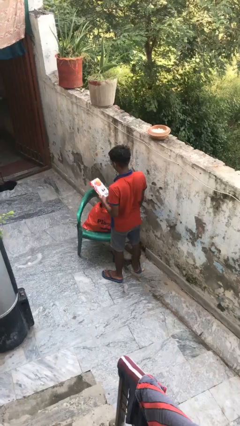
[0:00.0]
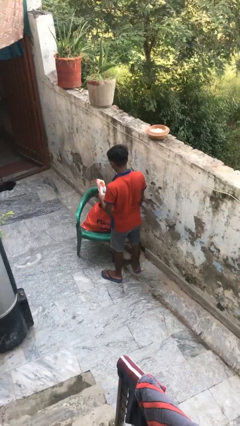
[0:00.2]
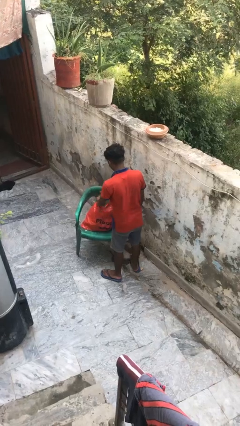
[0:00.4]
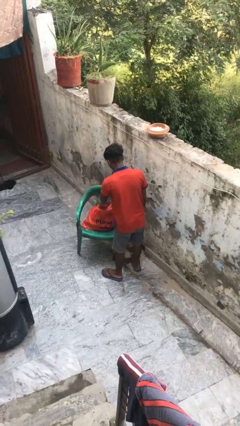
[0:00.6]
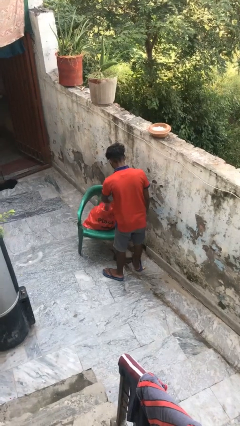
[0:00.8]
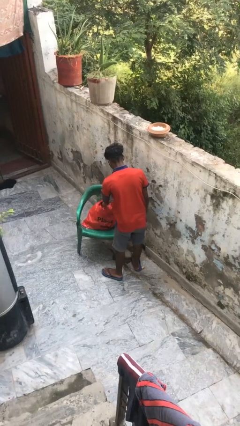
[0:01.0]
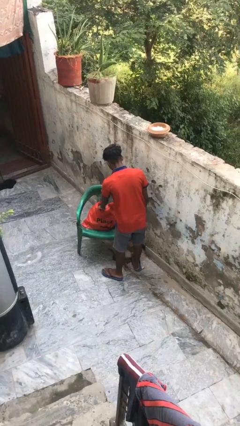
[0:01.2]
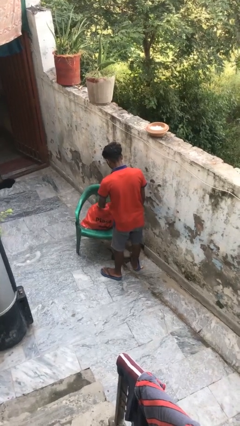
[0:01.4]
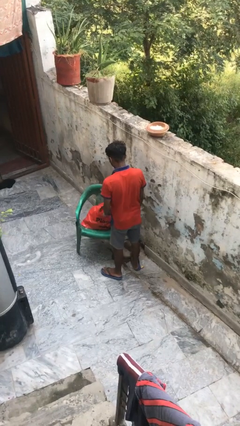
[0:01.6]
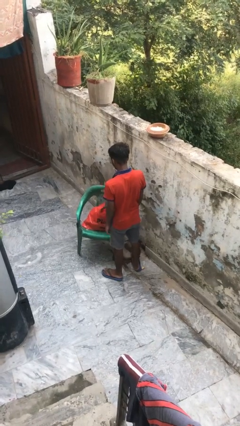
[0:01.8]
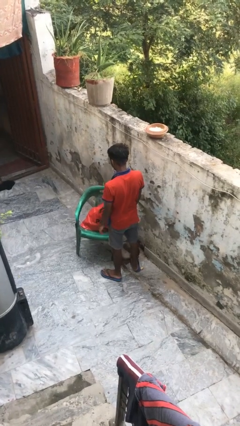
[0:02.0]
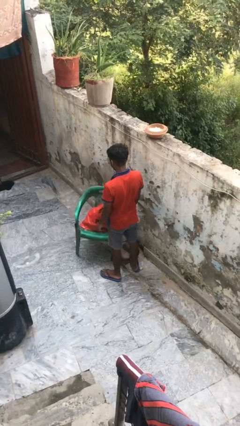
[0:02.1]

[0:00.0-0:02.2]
person puts object into bag

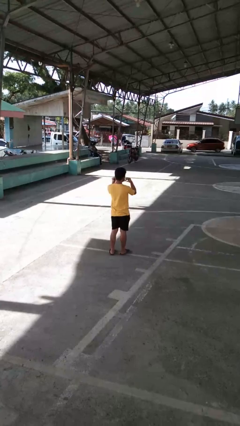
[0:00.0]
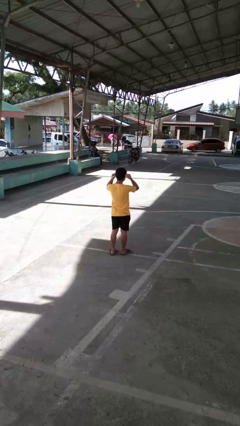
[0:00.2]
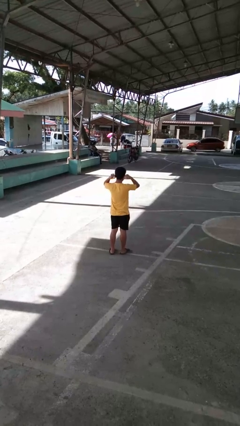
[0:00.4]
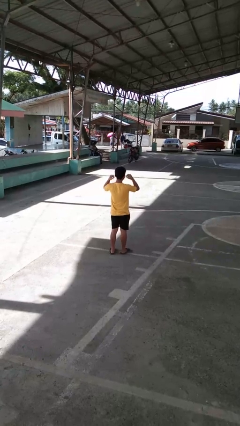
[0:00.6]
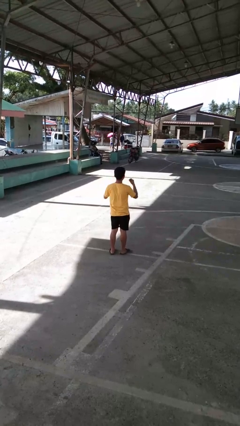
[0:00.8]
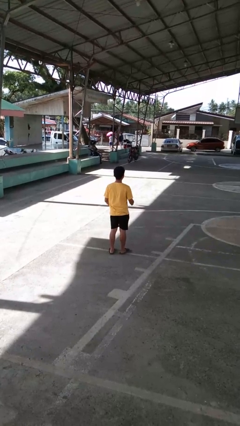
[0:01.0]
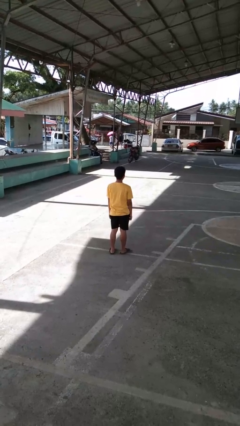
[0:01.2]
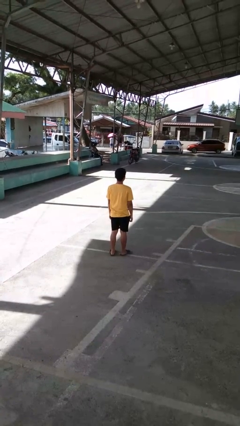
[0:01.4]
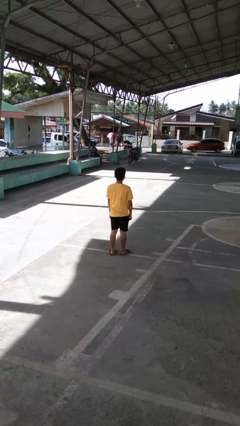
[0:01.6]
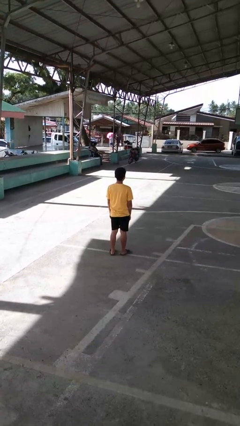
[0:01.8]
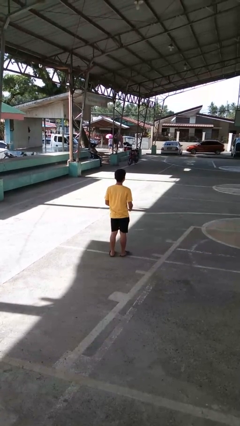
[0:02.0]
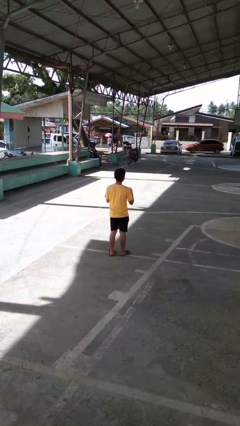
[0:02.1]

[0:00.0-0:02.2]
person puts on facemask

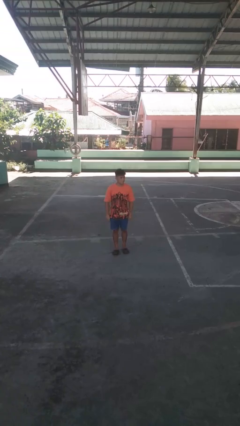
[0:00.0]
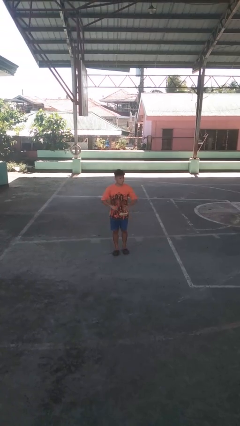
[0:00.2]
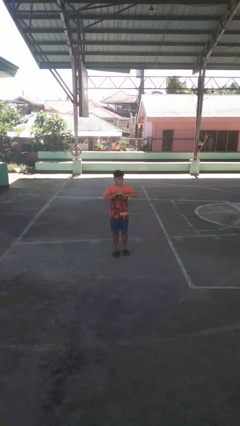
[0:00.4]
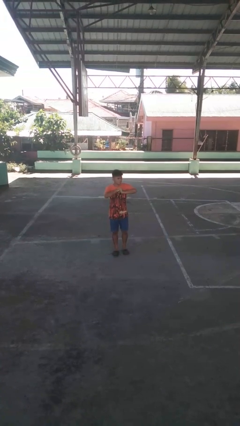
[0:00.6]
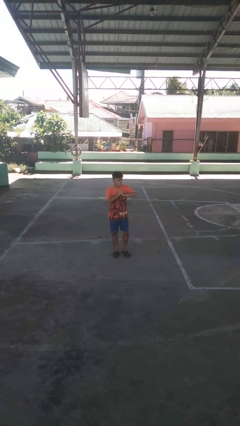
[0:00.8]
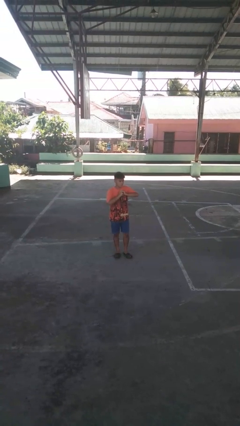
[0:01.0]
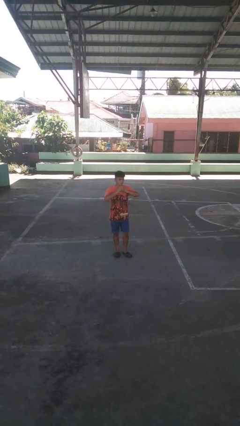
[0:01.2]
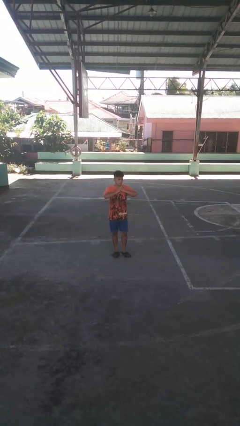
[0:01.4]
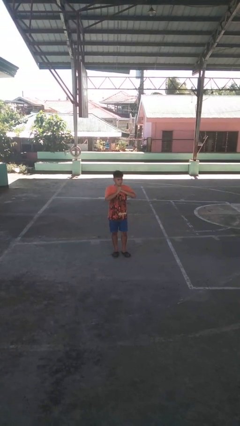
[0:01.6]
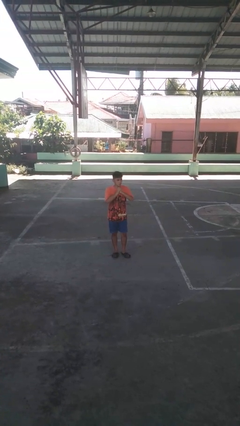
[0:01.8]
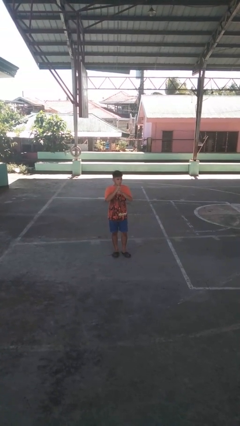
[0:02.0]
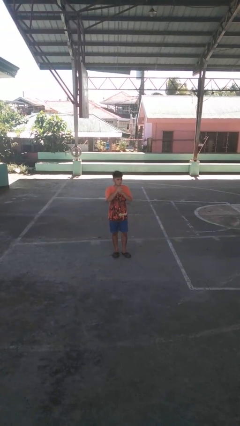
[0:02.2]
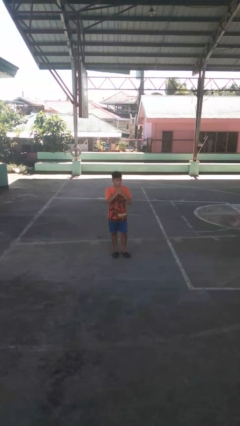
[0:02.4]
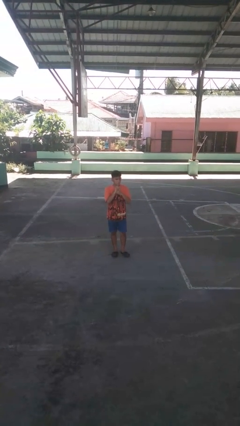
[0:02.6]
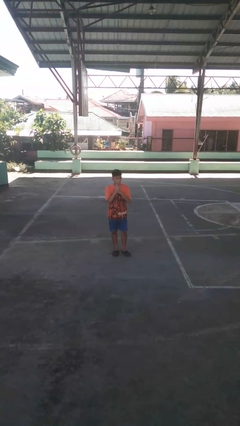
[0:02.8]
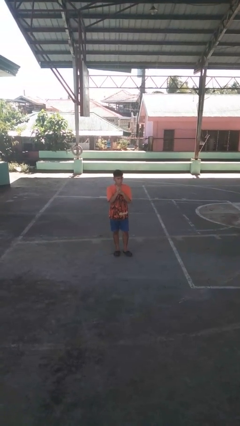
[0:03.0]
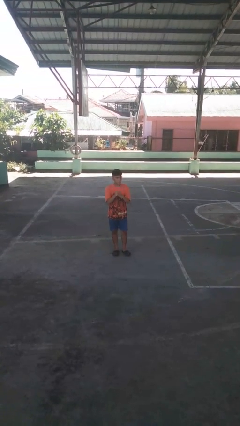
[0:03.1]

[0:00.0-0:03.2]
person cracks knuckles

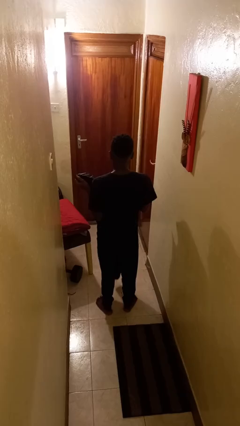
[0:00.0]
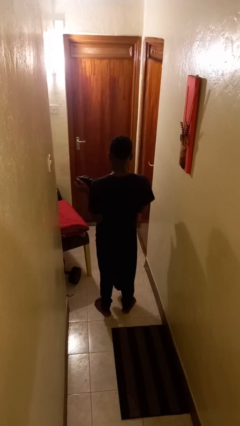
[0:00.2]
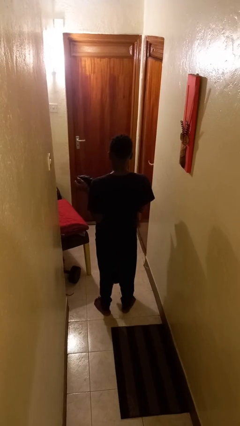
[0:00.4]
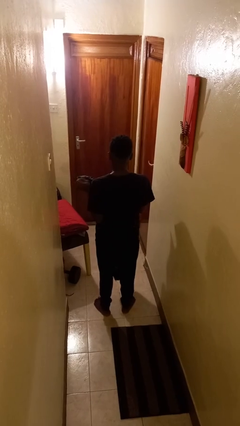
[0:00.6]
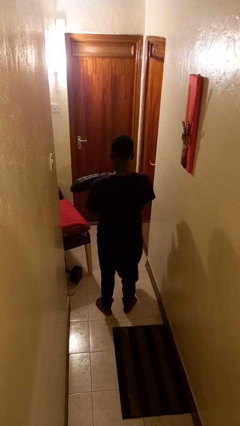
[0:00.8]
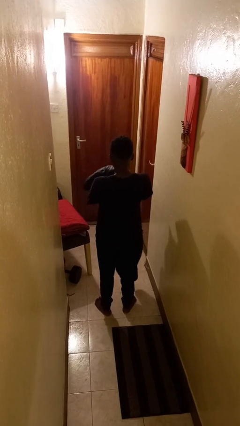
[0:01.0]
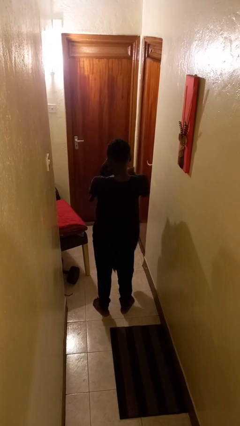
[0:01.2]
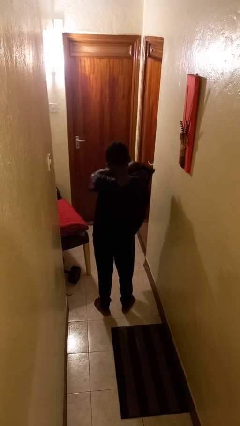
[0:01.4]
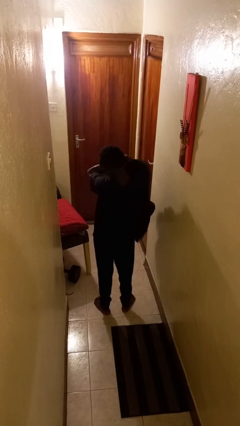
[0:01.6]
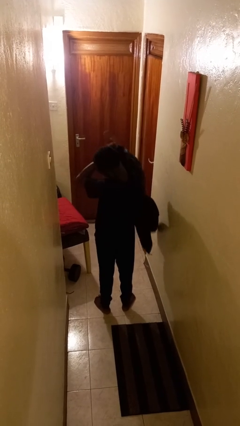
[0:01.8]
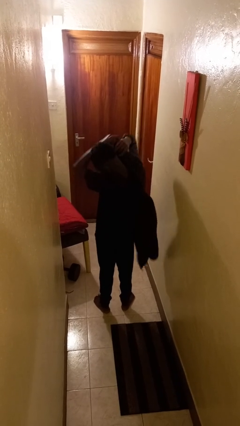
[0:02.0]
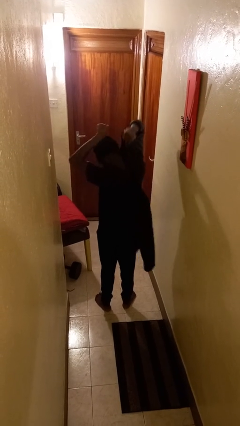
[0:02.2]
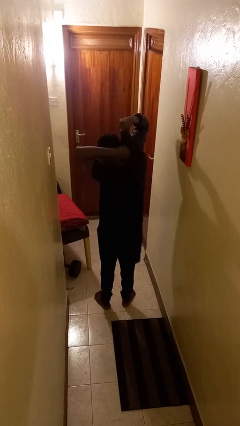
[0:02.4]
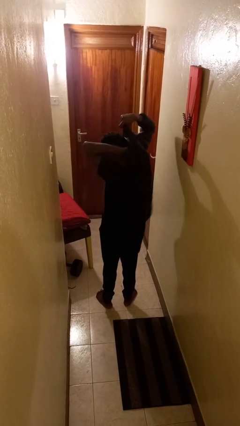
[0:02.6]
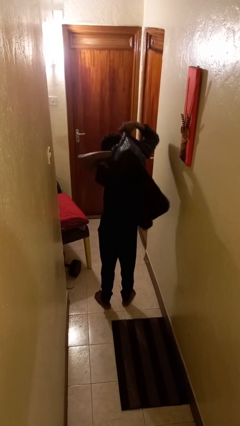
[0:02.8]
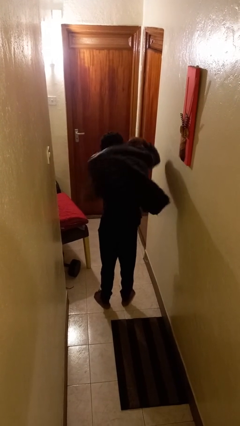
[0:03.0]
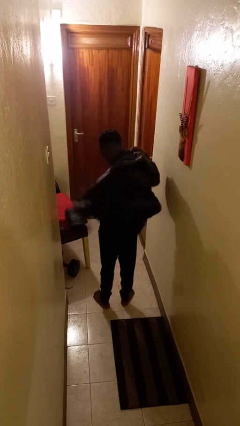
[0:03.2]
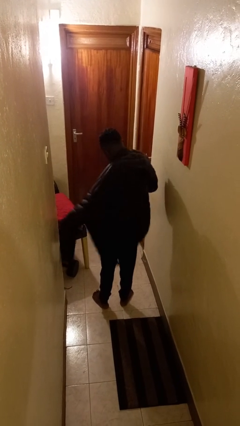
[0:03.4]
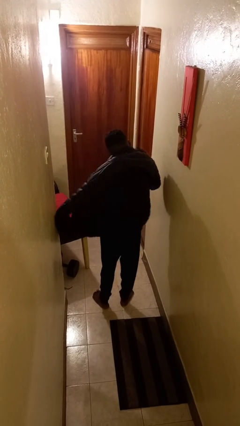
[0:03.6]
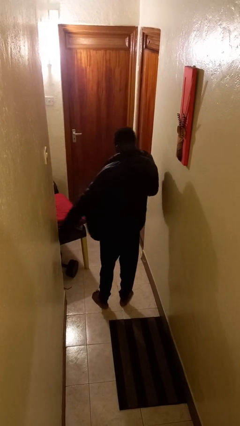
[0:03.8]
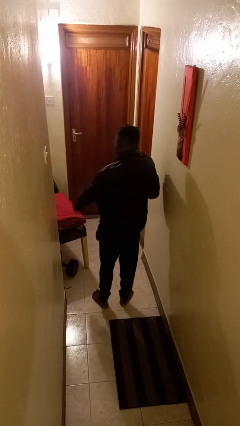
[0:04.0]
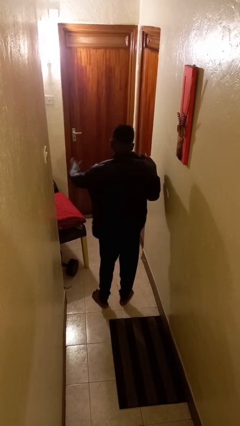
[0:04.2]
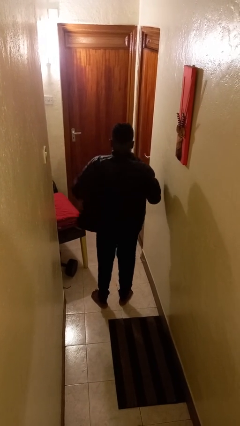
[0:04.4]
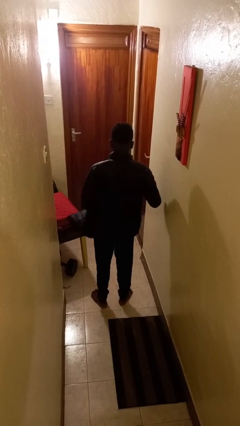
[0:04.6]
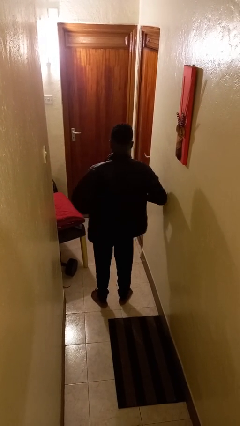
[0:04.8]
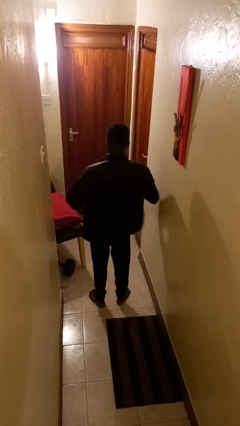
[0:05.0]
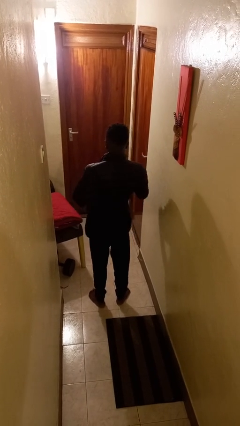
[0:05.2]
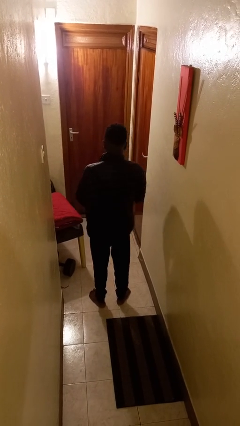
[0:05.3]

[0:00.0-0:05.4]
person puts on jacket

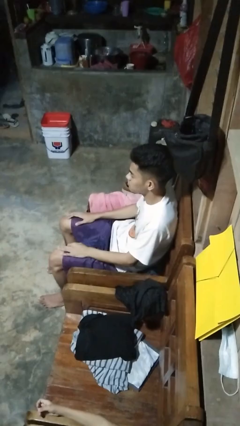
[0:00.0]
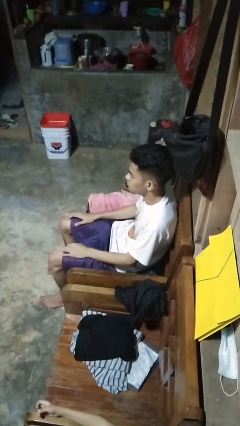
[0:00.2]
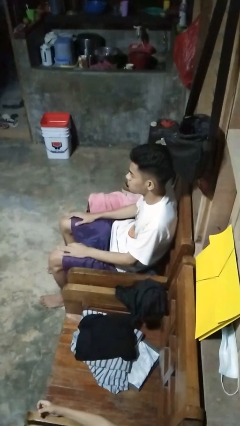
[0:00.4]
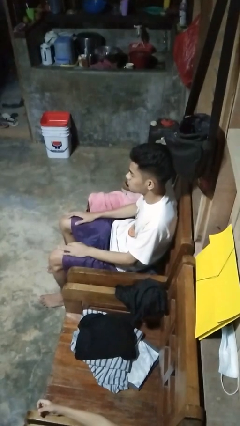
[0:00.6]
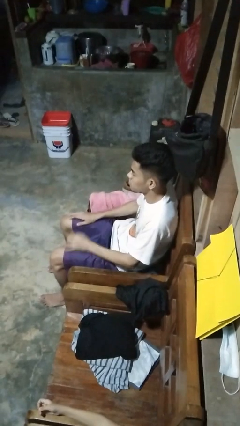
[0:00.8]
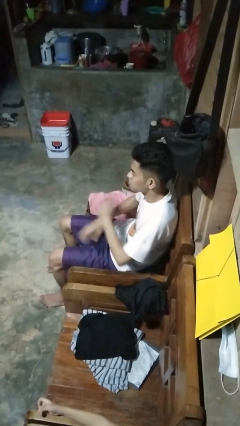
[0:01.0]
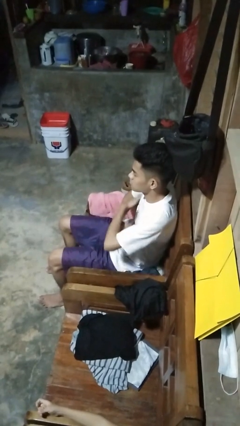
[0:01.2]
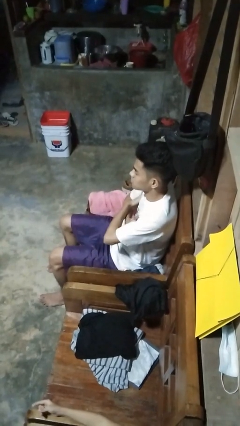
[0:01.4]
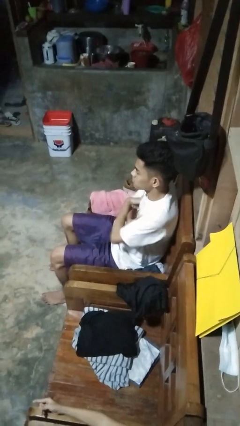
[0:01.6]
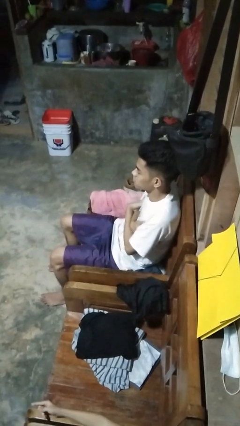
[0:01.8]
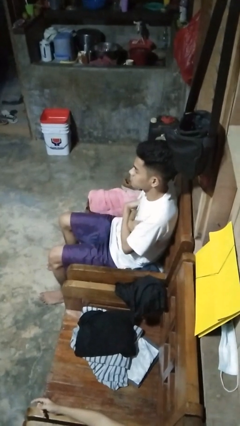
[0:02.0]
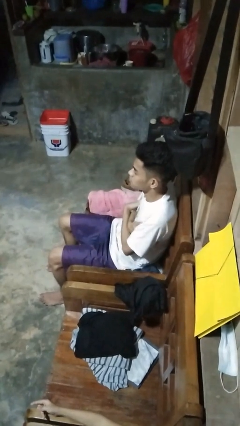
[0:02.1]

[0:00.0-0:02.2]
person crosses arms

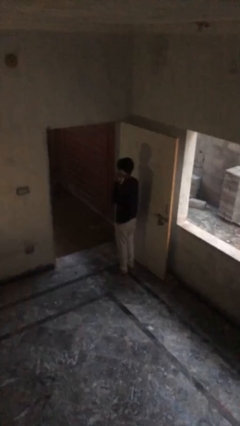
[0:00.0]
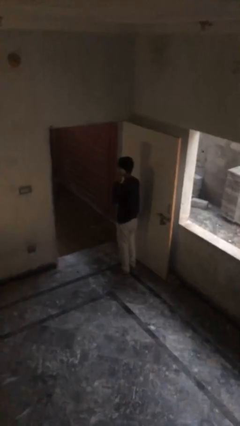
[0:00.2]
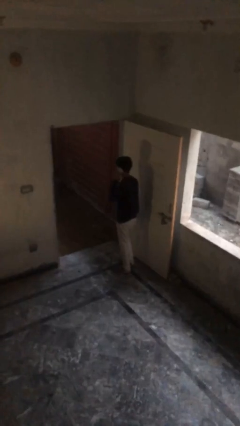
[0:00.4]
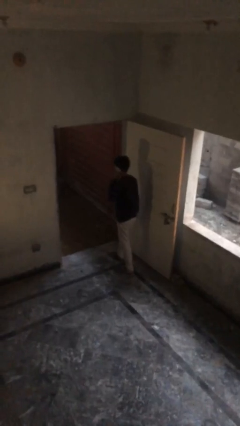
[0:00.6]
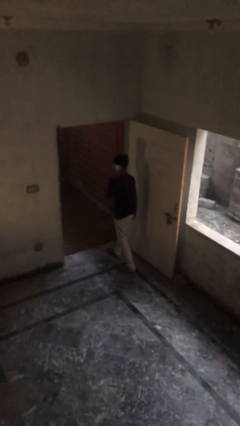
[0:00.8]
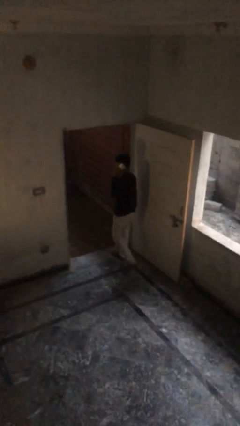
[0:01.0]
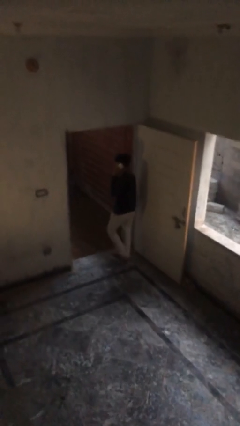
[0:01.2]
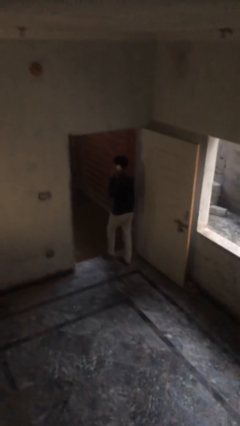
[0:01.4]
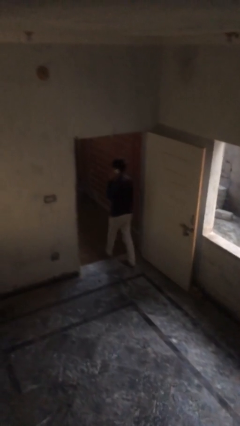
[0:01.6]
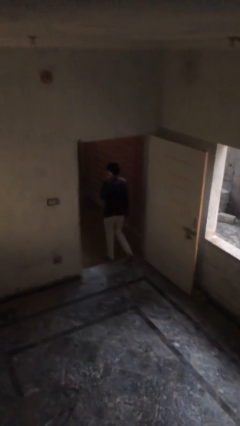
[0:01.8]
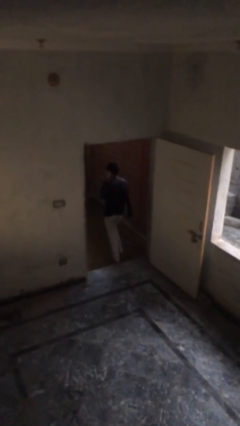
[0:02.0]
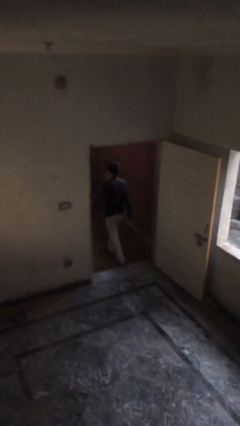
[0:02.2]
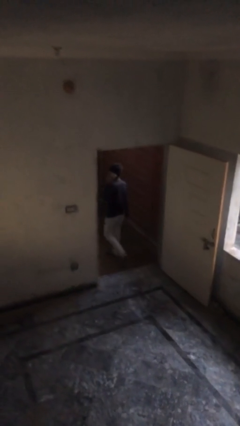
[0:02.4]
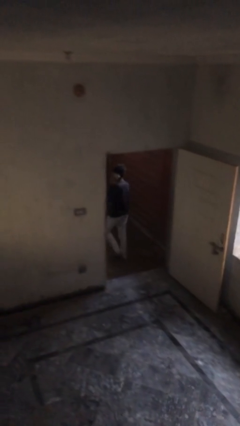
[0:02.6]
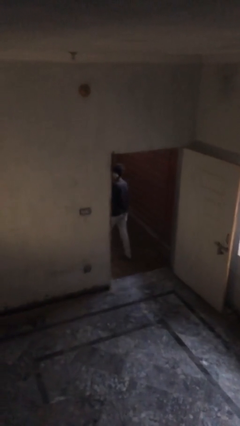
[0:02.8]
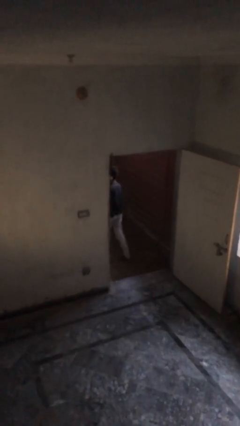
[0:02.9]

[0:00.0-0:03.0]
person exits scene through structure
